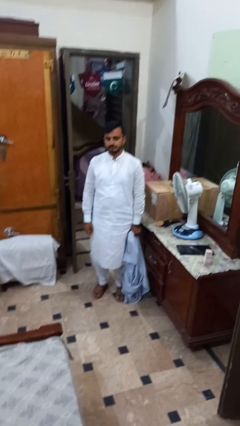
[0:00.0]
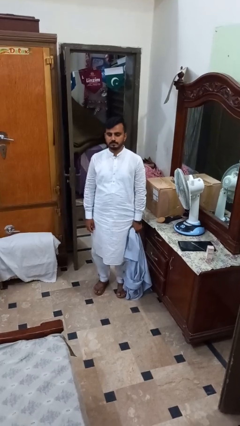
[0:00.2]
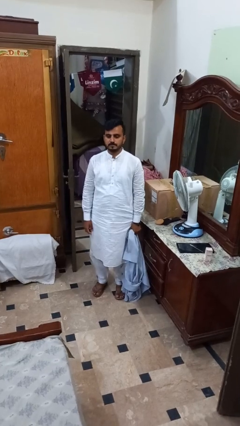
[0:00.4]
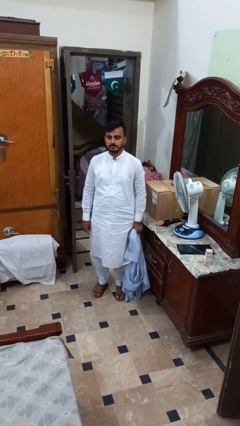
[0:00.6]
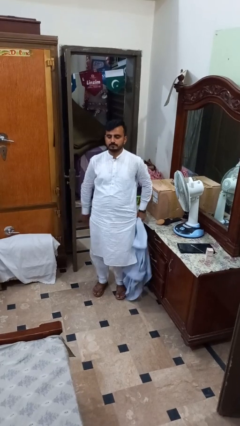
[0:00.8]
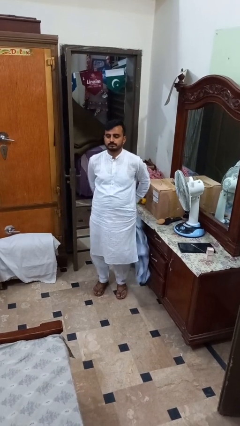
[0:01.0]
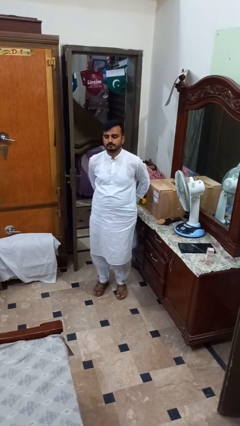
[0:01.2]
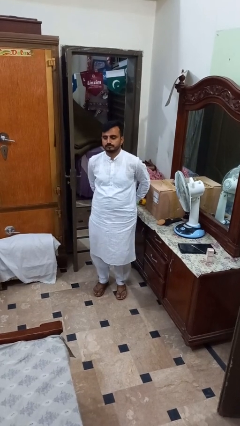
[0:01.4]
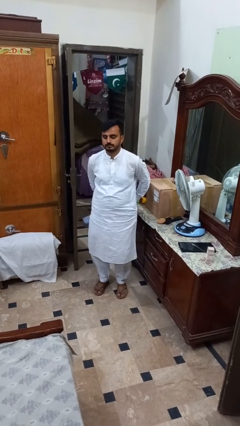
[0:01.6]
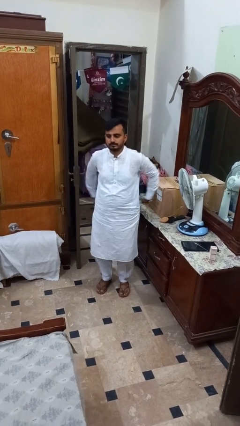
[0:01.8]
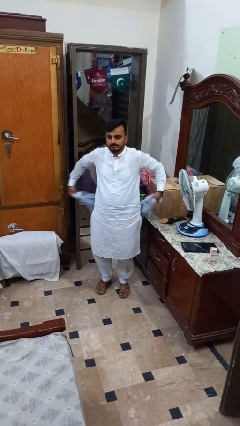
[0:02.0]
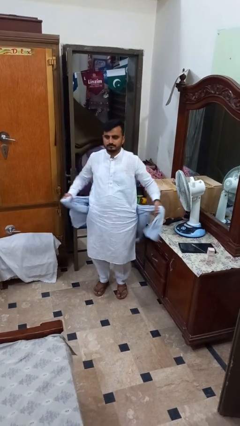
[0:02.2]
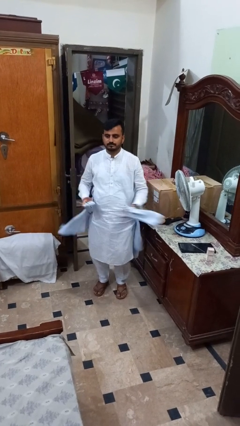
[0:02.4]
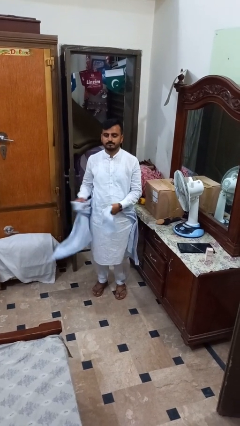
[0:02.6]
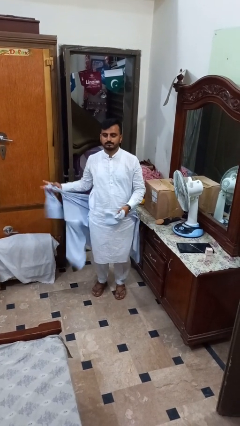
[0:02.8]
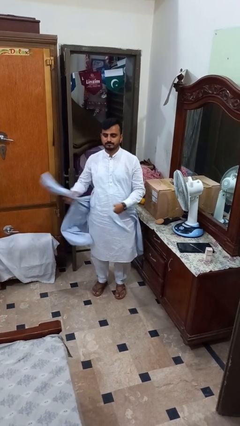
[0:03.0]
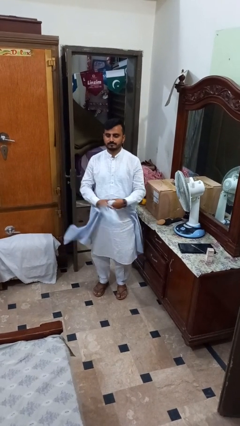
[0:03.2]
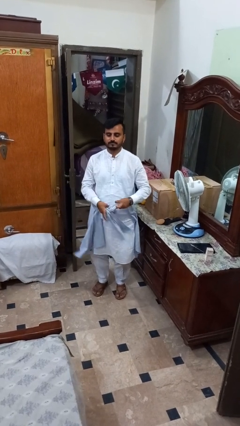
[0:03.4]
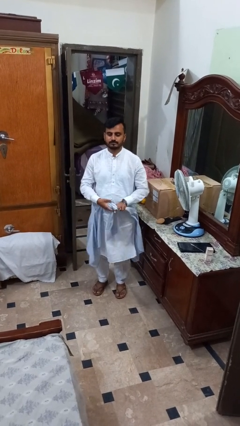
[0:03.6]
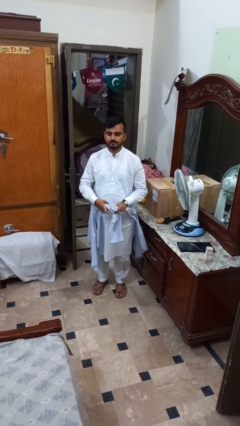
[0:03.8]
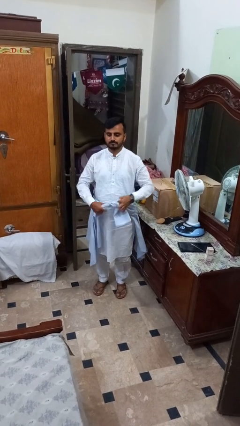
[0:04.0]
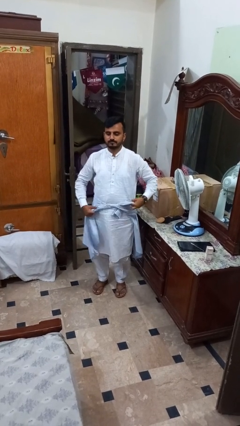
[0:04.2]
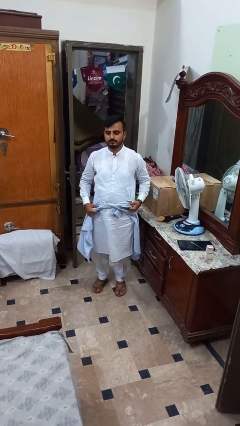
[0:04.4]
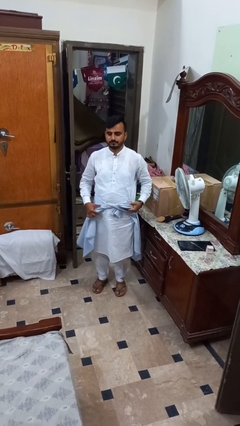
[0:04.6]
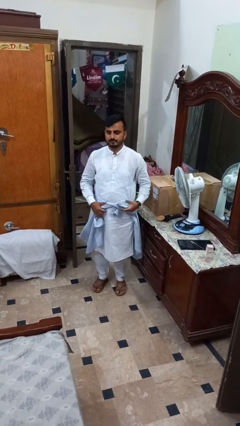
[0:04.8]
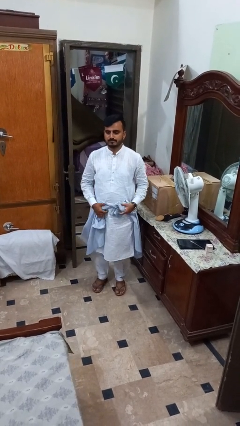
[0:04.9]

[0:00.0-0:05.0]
person ties jacket around waist

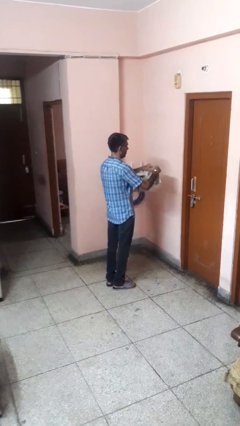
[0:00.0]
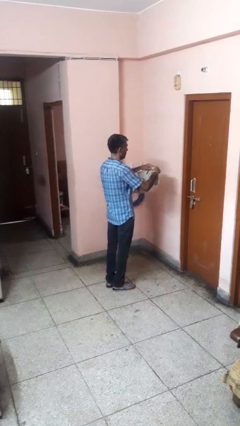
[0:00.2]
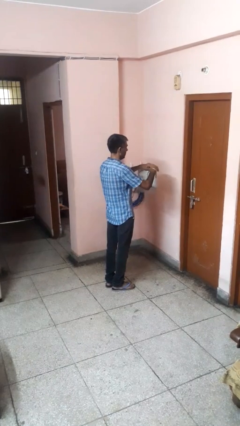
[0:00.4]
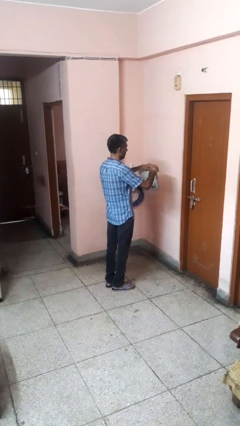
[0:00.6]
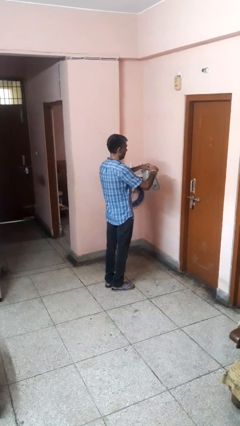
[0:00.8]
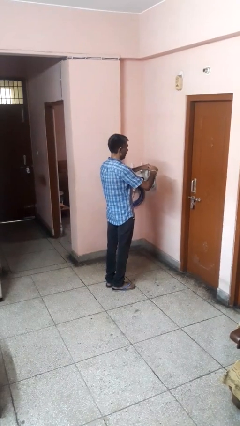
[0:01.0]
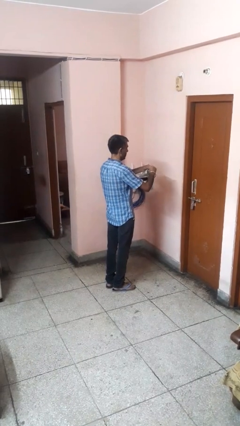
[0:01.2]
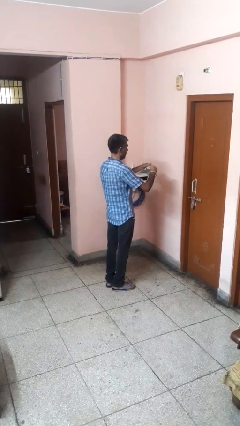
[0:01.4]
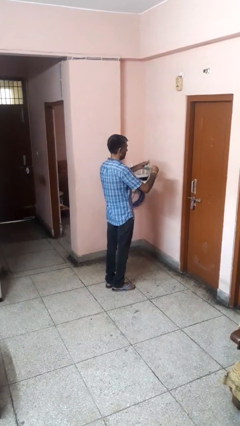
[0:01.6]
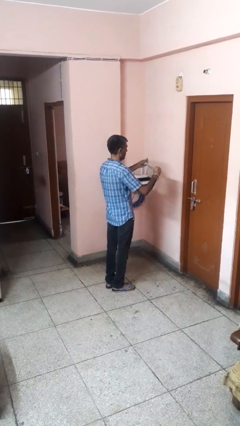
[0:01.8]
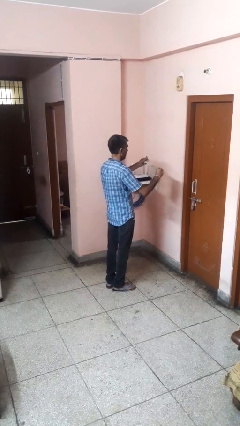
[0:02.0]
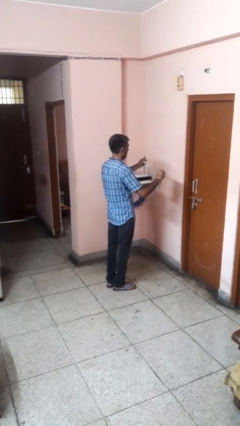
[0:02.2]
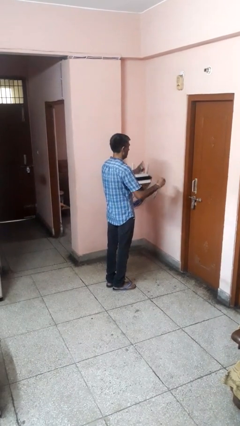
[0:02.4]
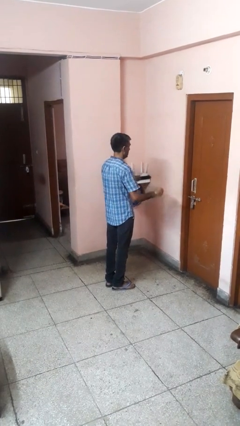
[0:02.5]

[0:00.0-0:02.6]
person tears paper

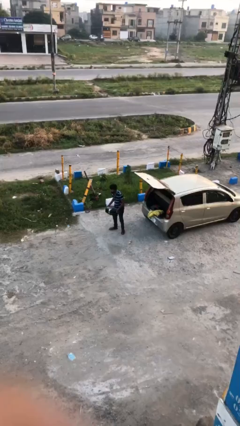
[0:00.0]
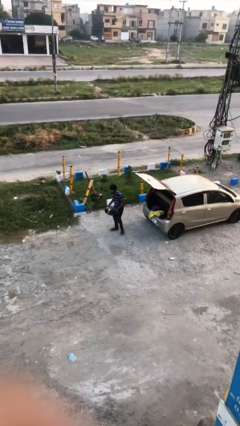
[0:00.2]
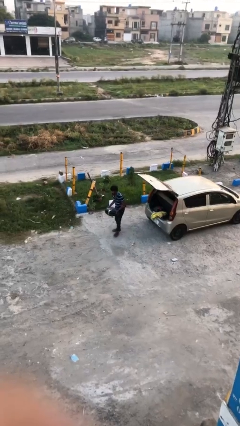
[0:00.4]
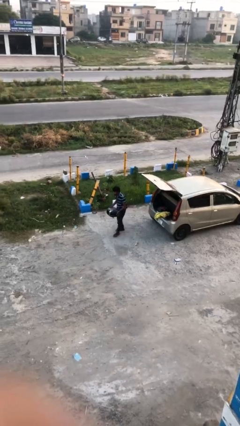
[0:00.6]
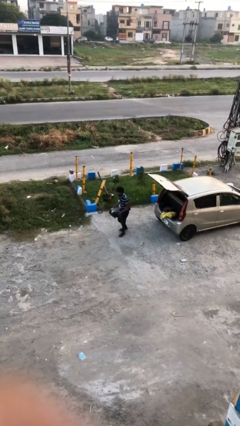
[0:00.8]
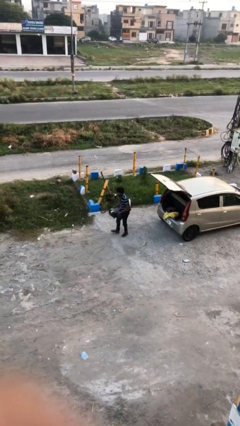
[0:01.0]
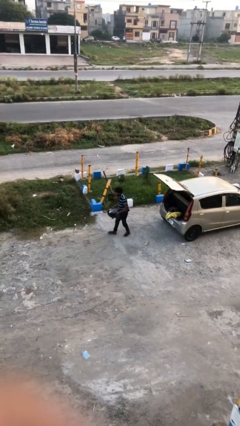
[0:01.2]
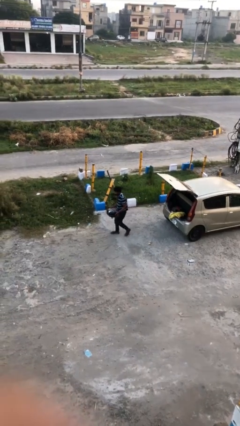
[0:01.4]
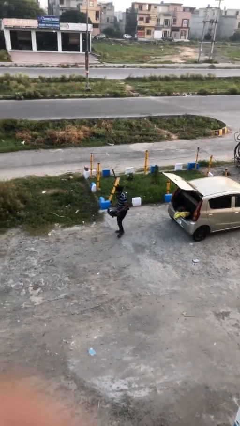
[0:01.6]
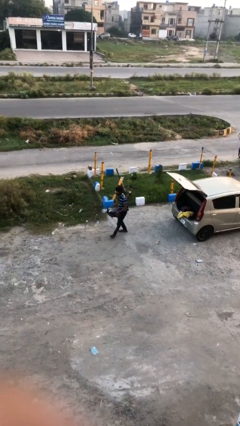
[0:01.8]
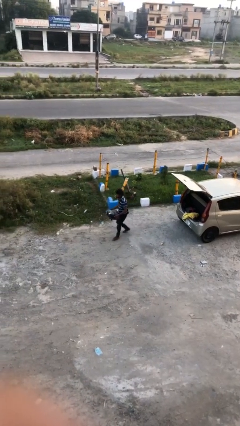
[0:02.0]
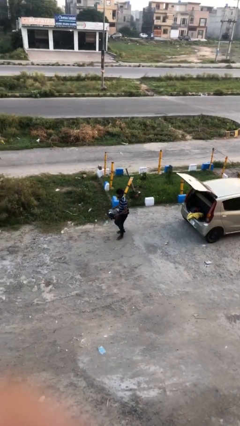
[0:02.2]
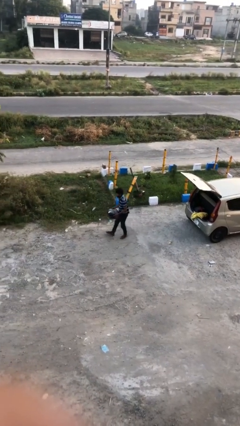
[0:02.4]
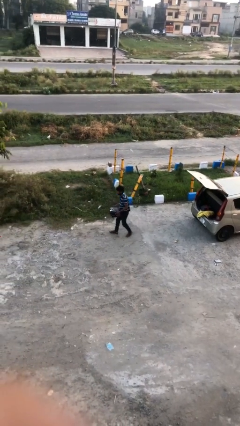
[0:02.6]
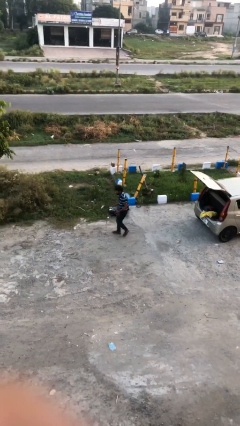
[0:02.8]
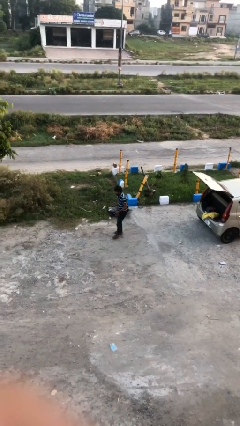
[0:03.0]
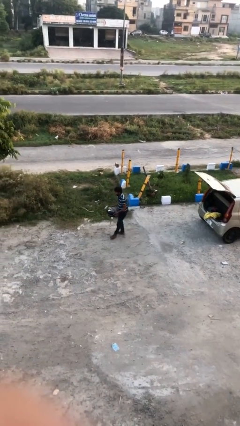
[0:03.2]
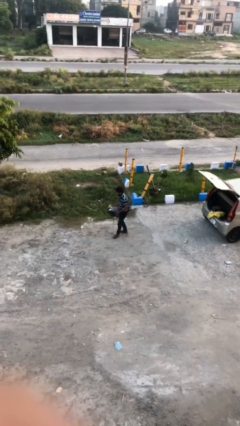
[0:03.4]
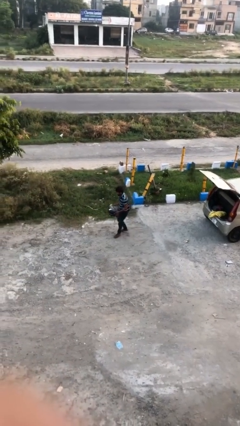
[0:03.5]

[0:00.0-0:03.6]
person carries heavy object

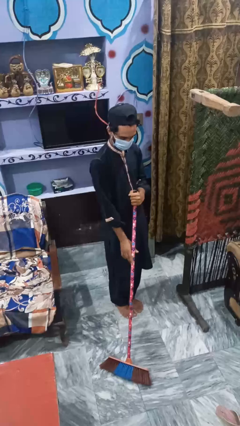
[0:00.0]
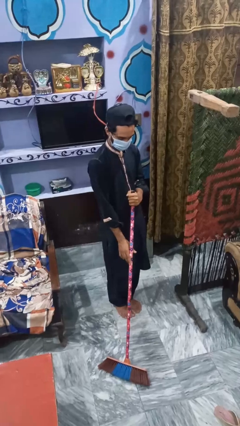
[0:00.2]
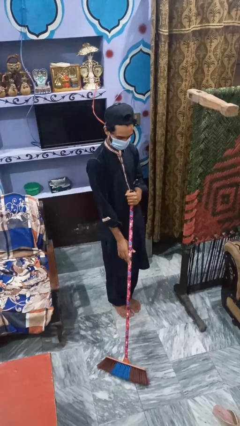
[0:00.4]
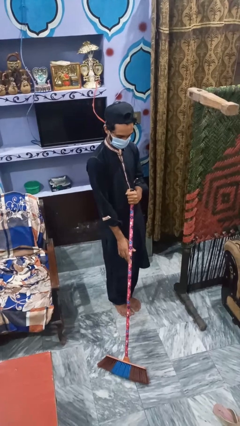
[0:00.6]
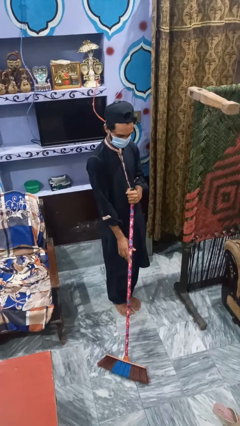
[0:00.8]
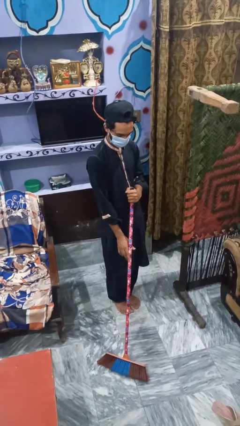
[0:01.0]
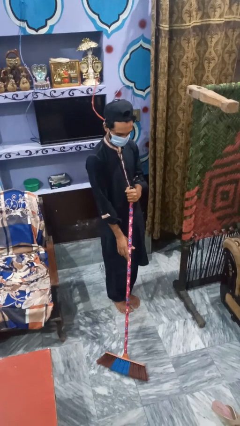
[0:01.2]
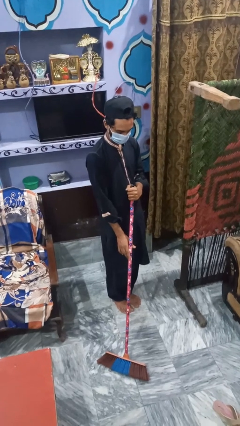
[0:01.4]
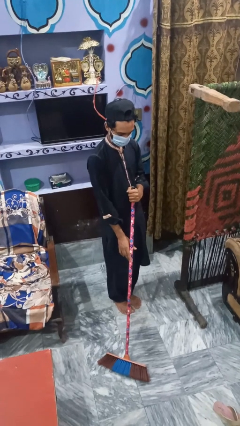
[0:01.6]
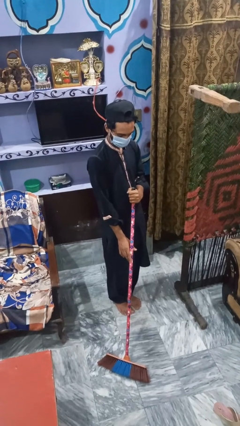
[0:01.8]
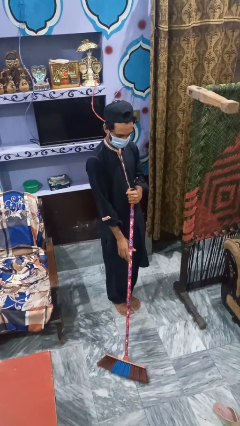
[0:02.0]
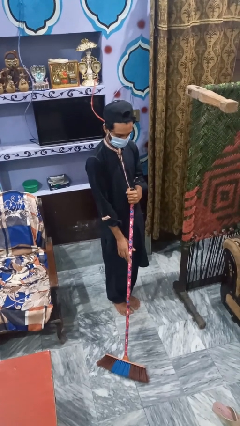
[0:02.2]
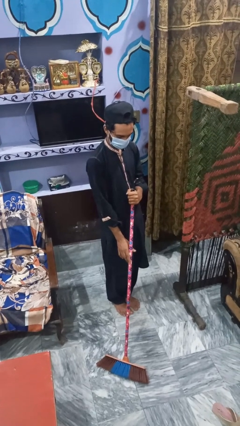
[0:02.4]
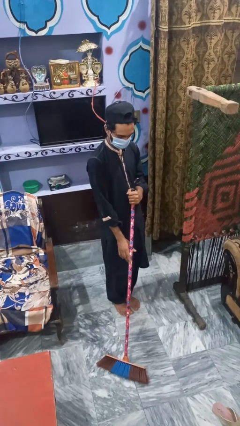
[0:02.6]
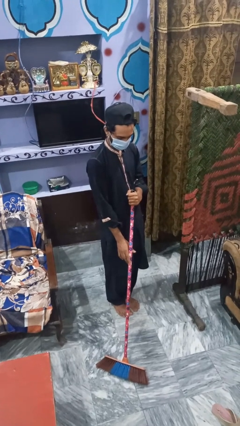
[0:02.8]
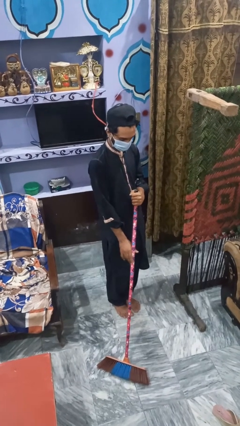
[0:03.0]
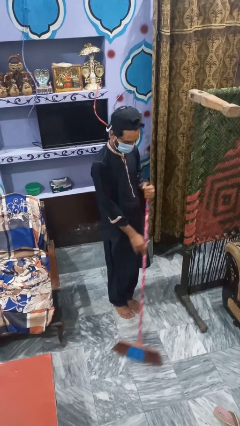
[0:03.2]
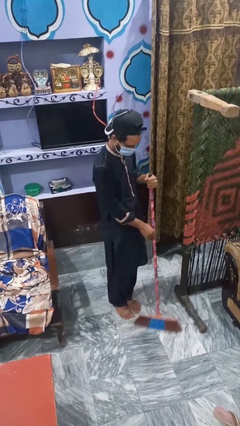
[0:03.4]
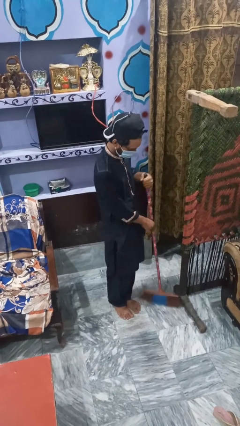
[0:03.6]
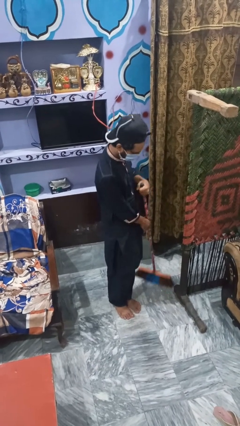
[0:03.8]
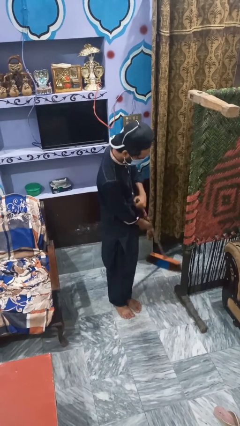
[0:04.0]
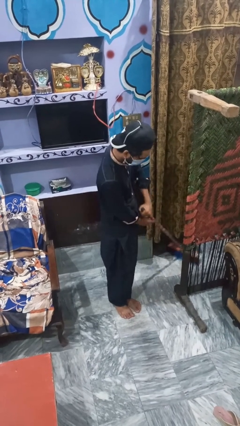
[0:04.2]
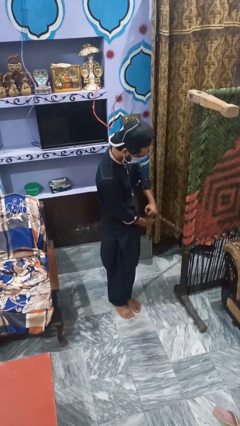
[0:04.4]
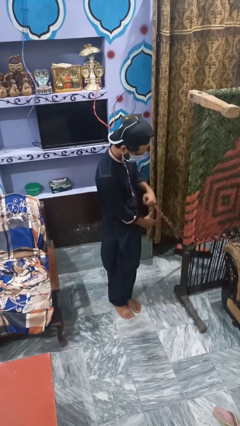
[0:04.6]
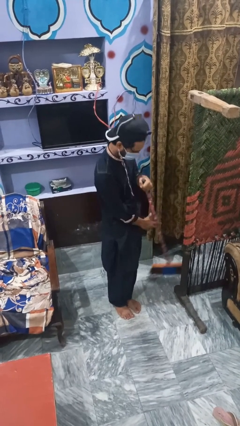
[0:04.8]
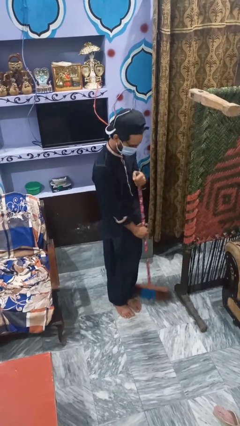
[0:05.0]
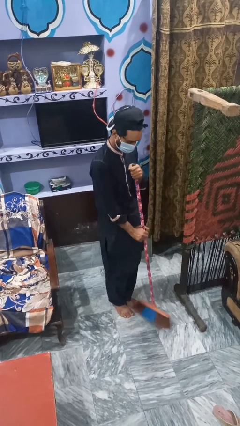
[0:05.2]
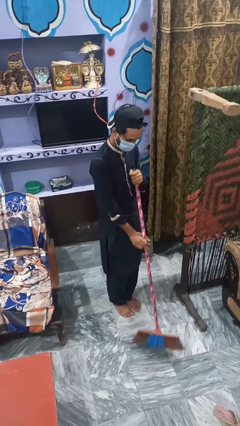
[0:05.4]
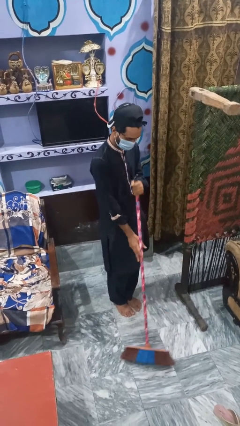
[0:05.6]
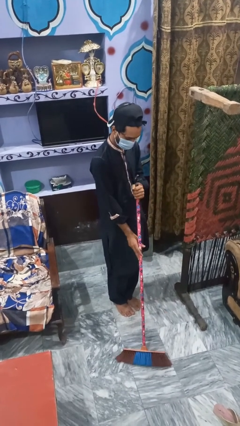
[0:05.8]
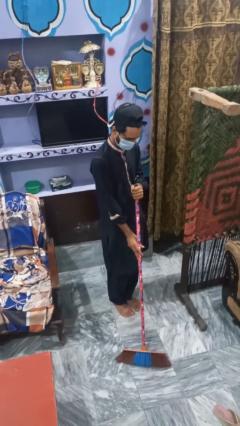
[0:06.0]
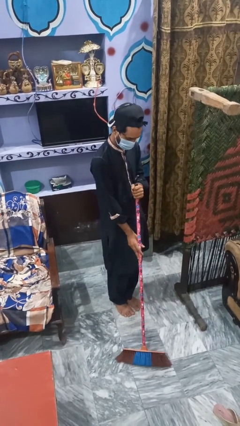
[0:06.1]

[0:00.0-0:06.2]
person mops

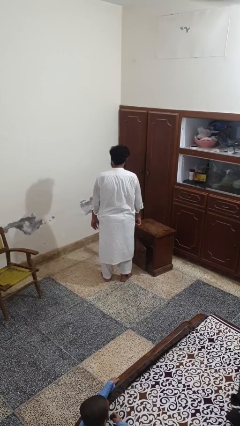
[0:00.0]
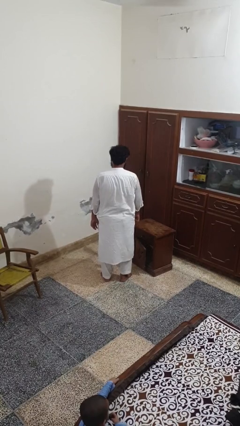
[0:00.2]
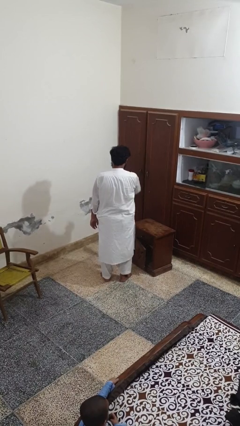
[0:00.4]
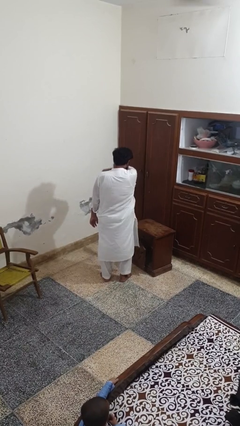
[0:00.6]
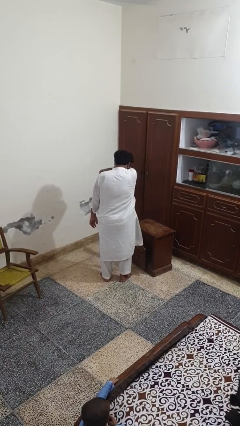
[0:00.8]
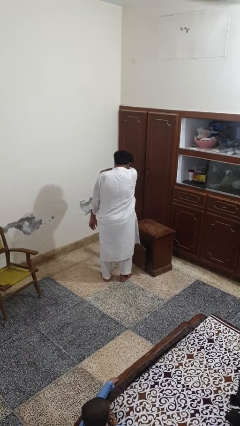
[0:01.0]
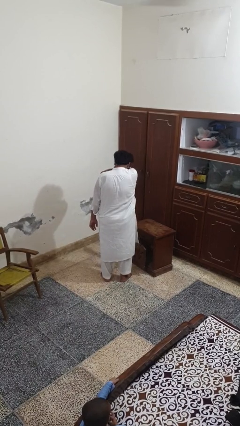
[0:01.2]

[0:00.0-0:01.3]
person sneezes into arm
